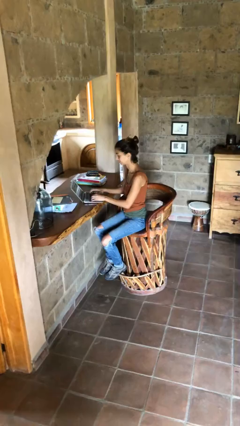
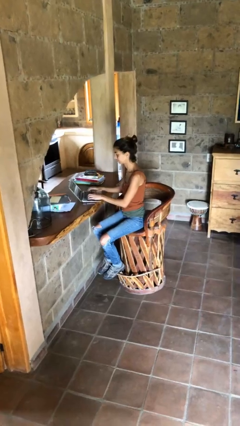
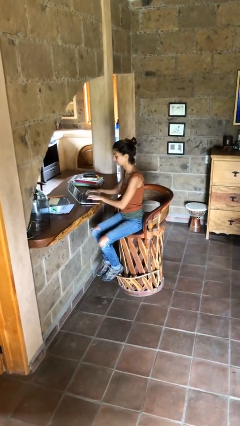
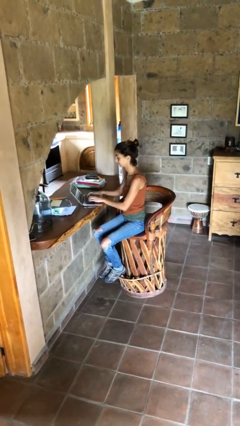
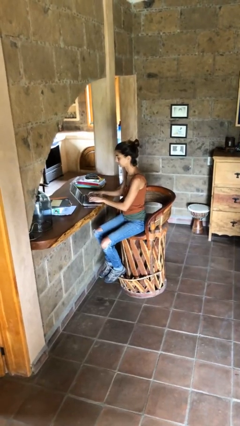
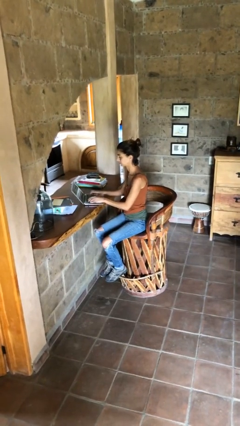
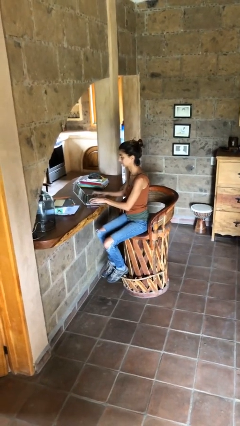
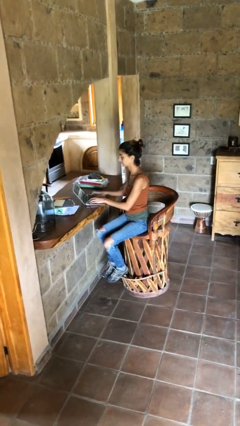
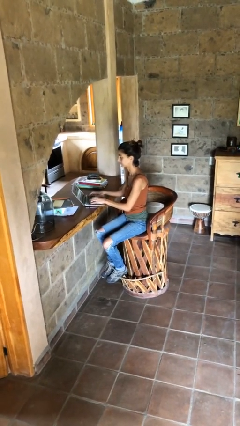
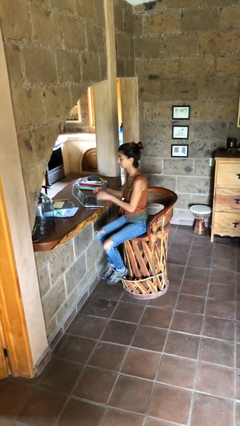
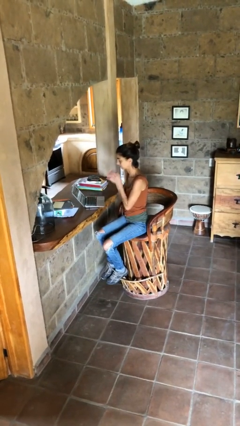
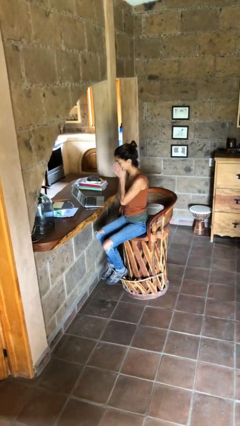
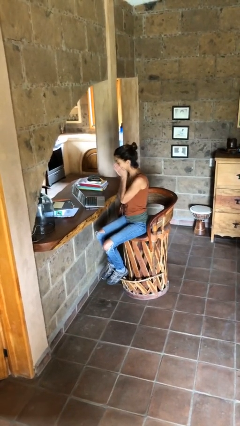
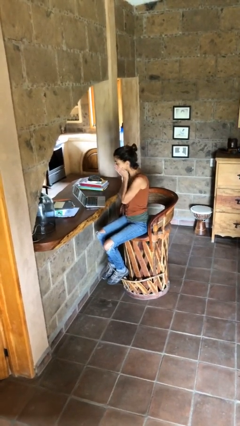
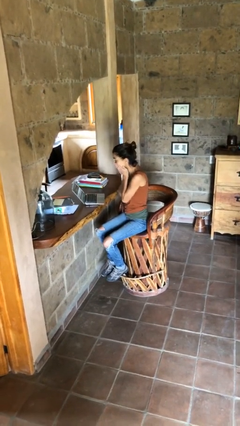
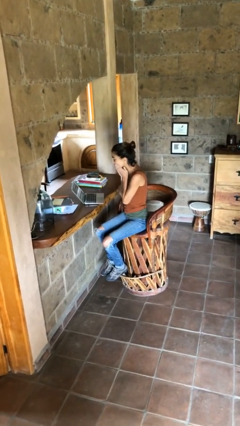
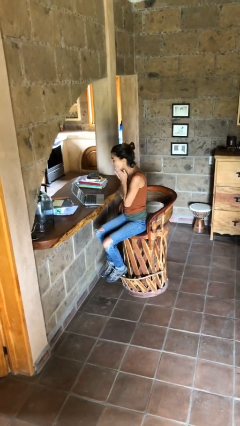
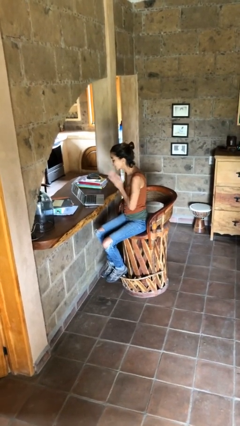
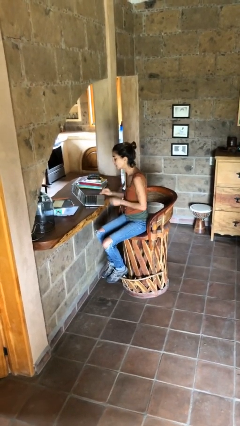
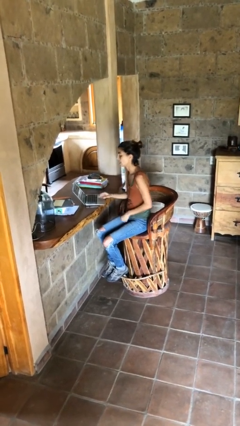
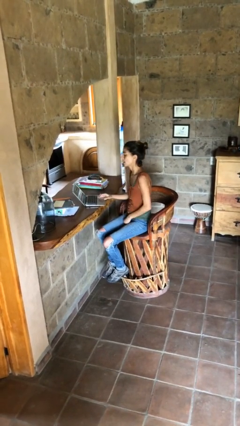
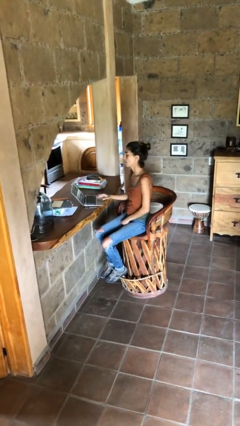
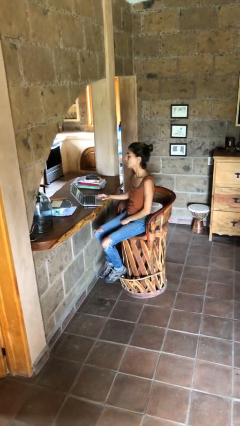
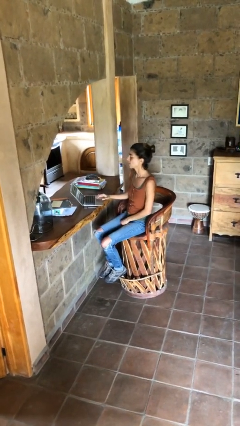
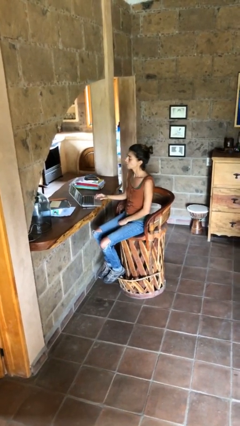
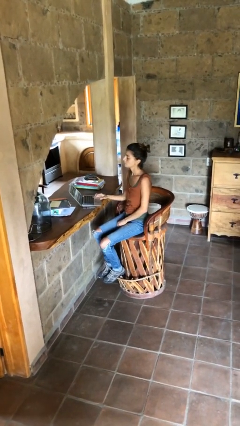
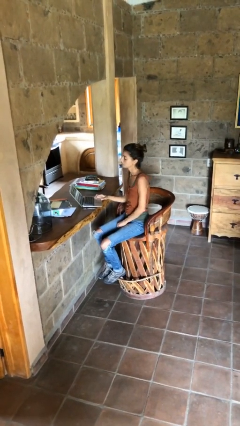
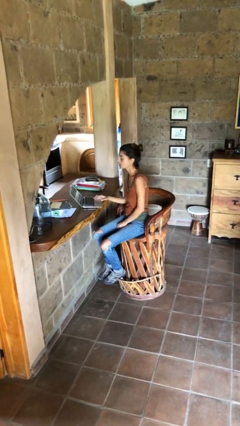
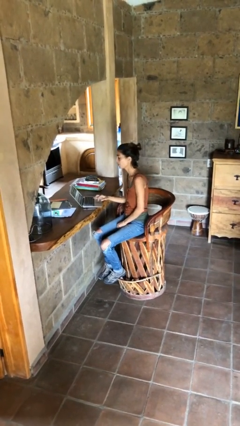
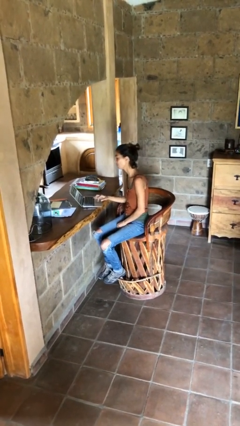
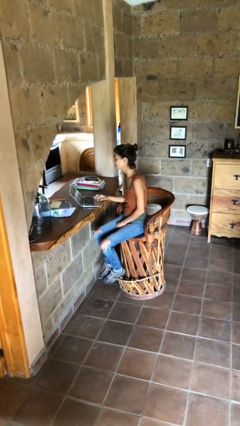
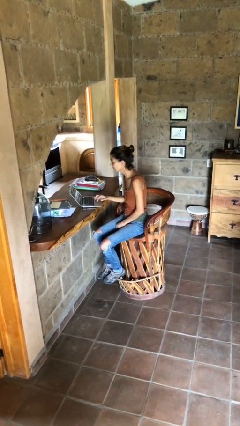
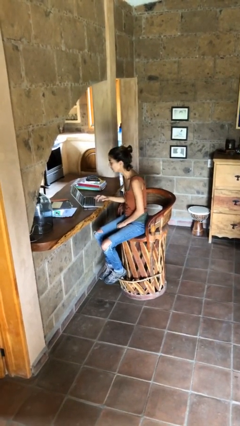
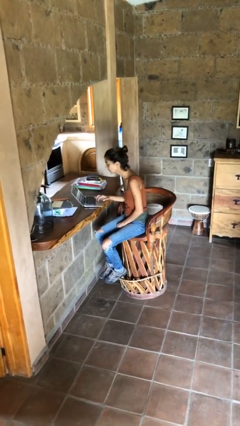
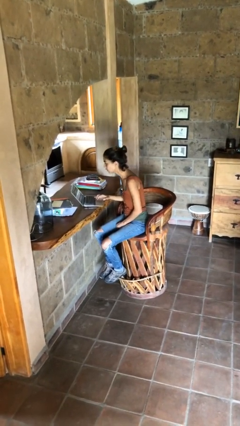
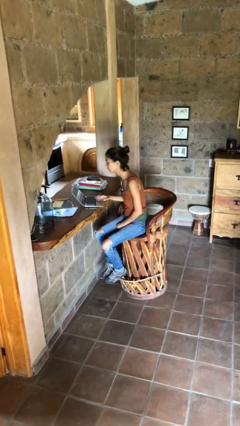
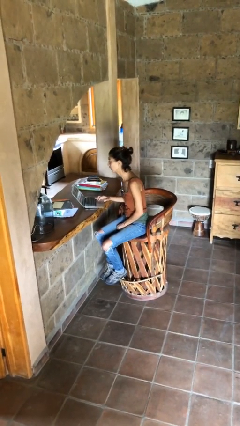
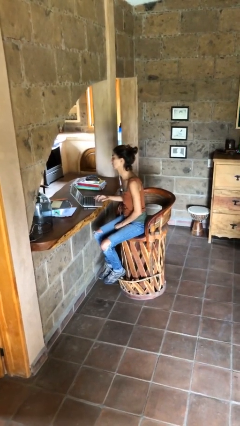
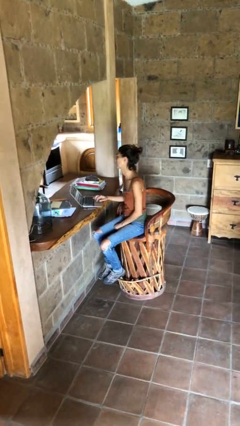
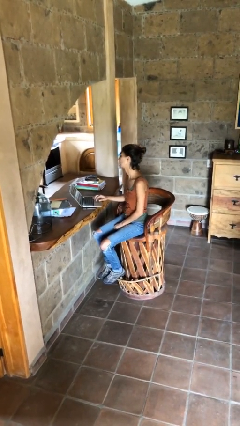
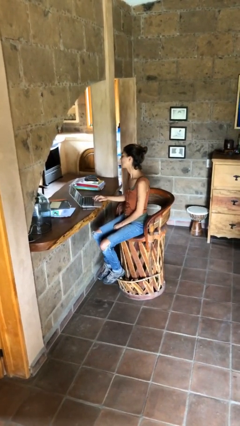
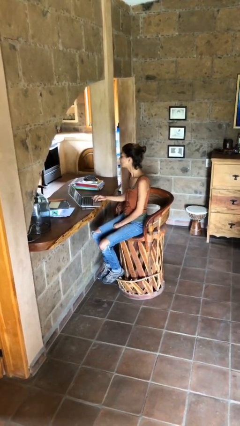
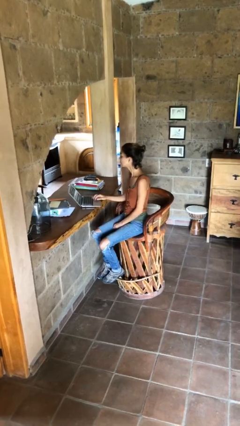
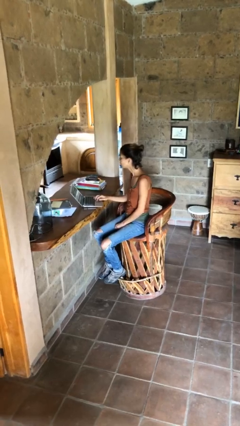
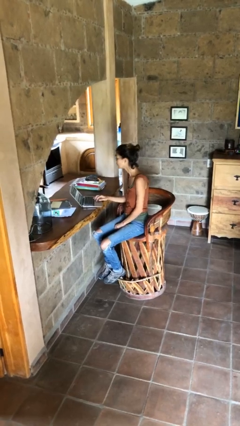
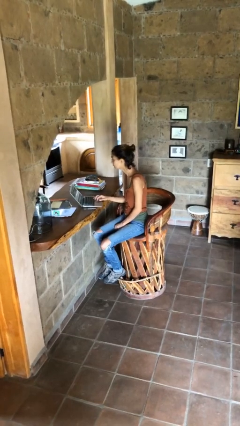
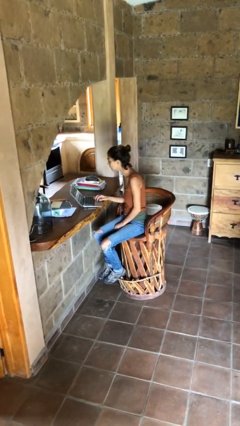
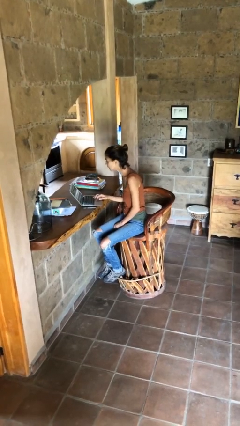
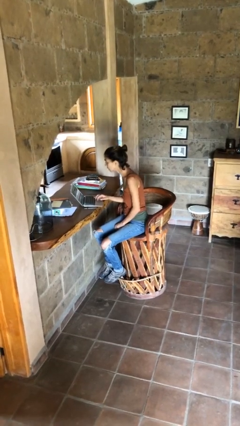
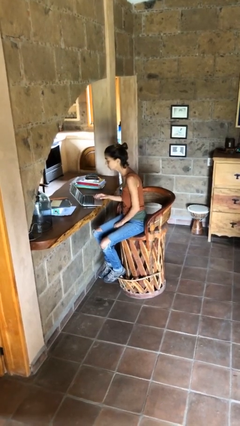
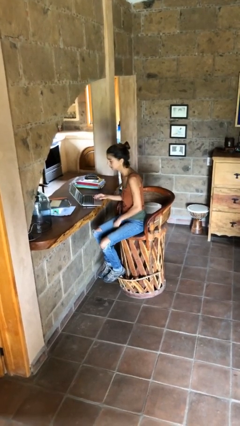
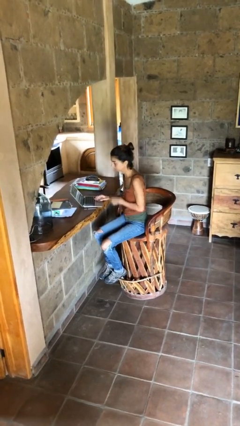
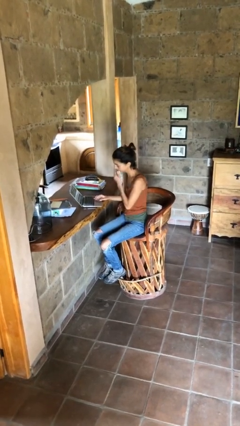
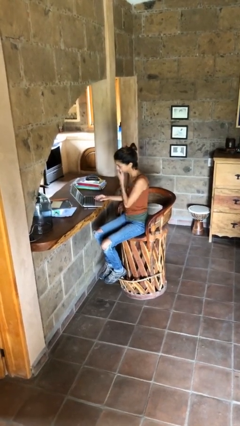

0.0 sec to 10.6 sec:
person interacts with laptop

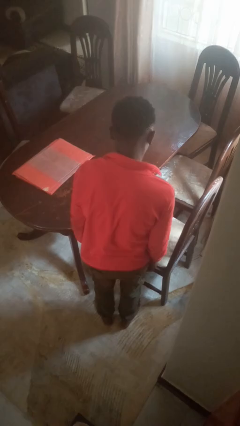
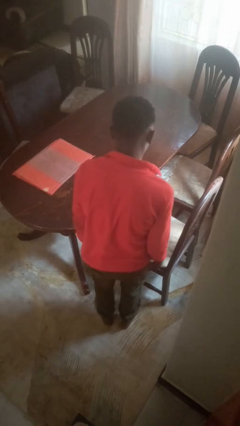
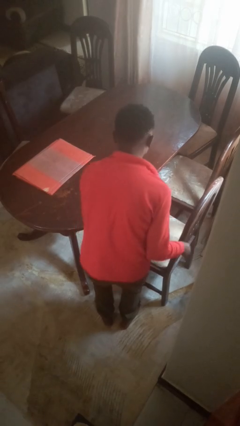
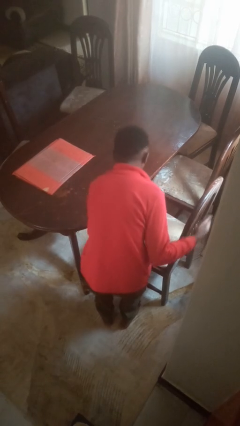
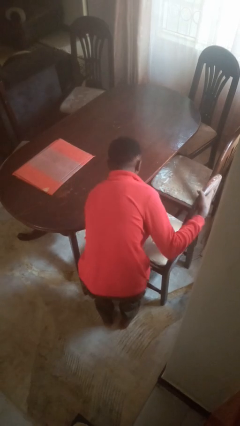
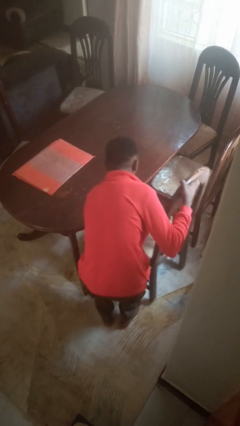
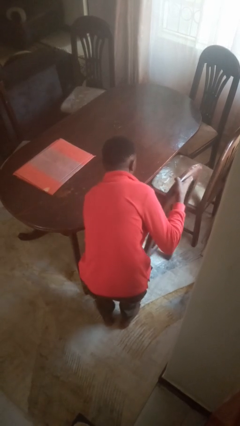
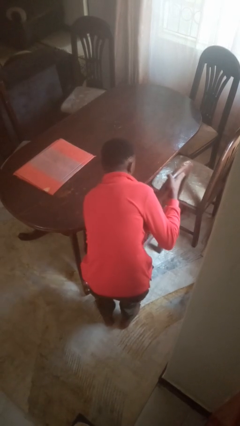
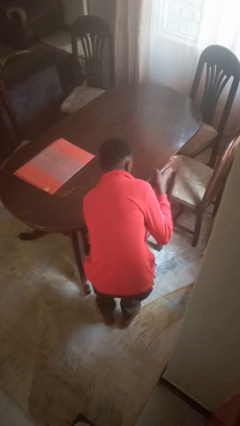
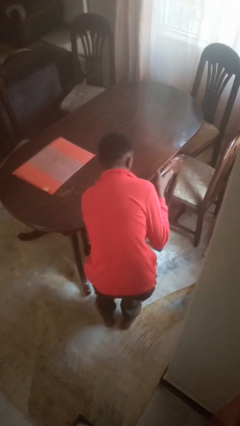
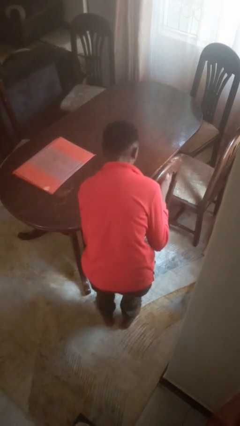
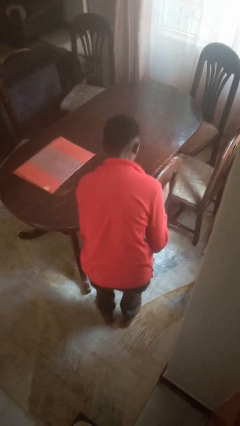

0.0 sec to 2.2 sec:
person pushes in chair

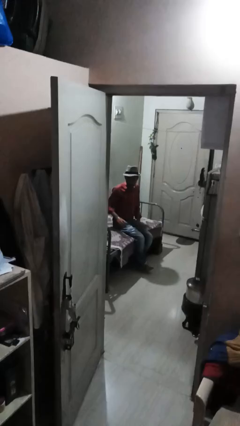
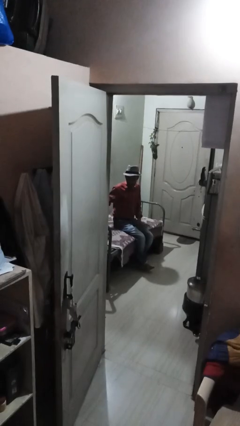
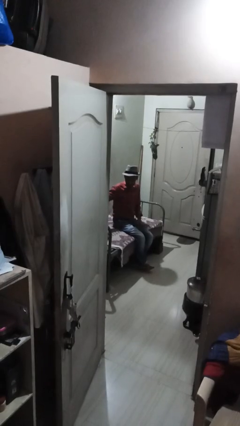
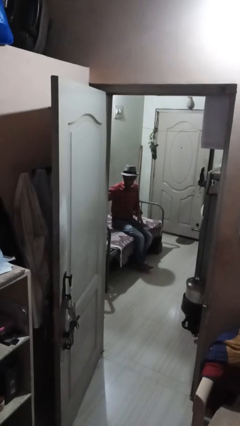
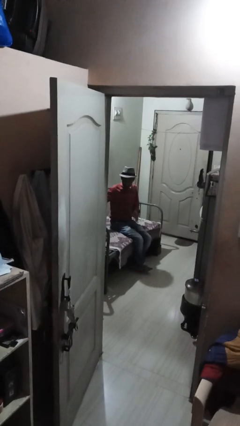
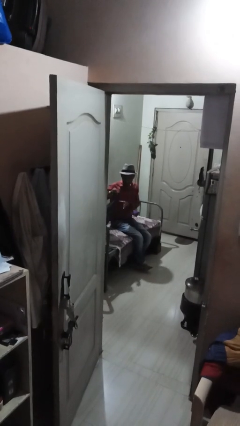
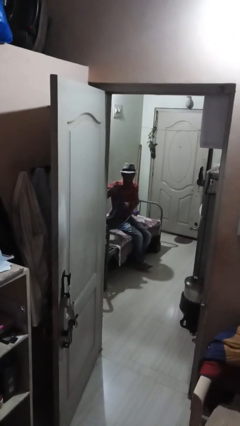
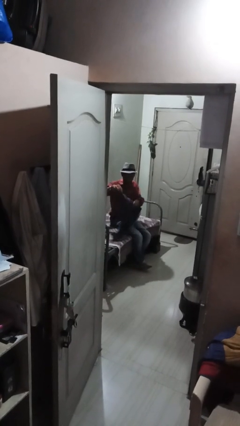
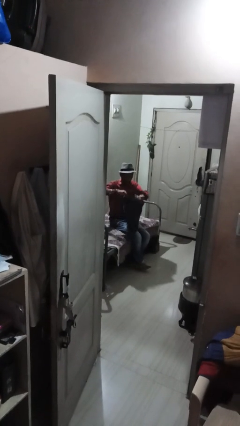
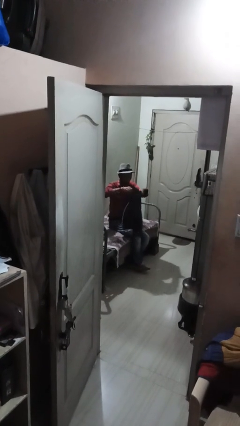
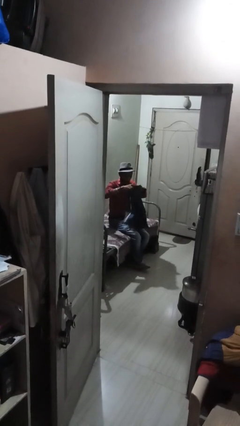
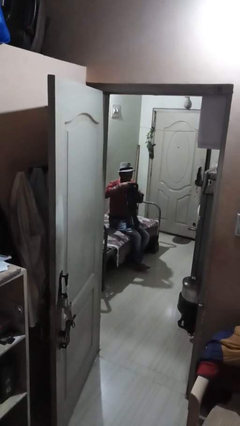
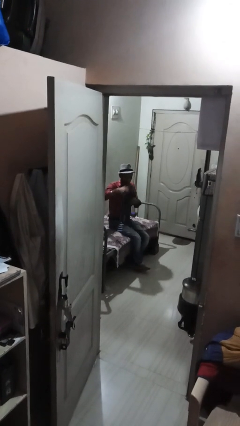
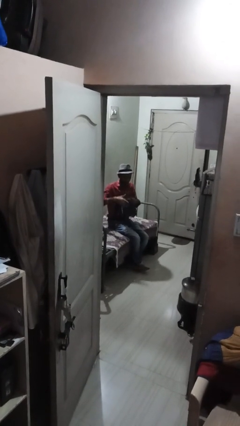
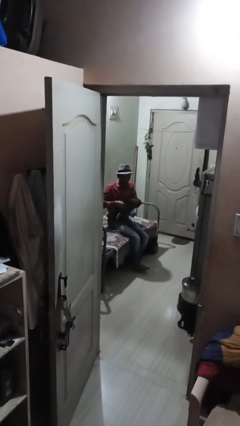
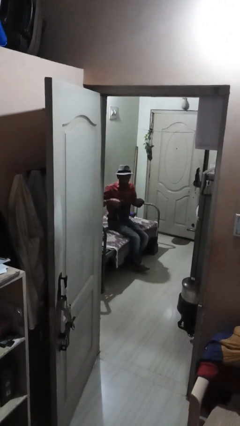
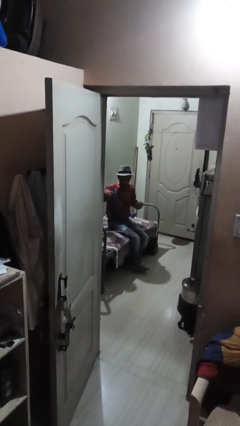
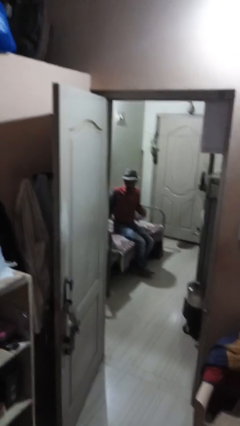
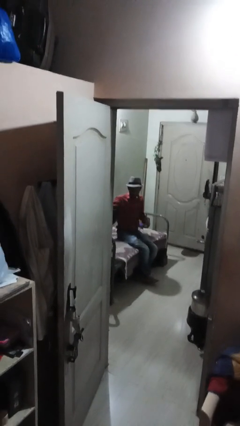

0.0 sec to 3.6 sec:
person folds pants

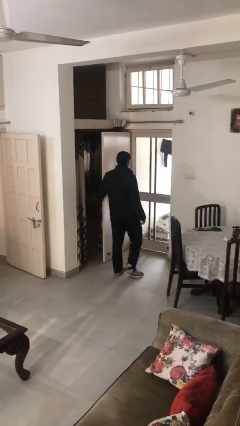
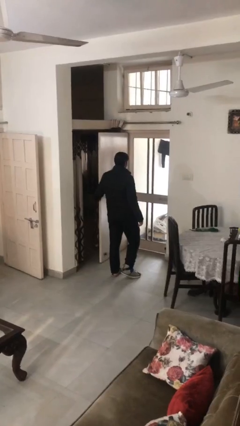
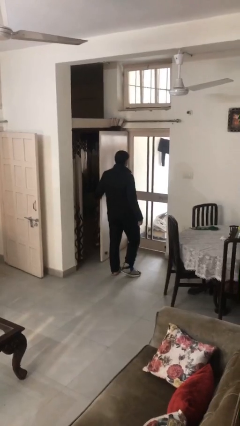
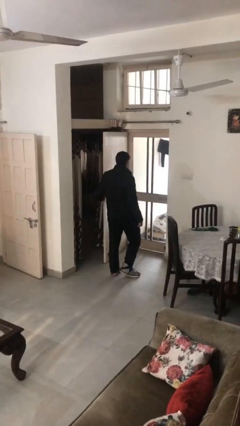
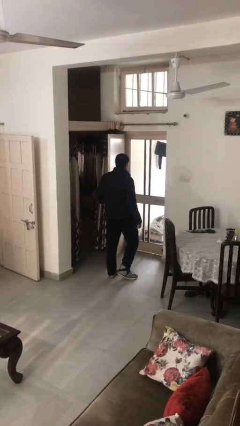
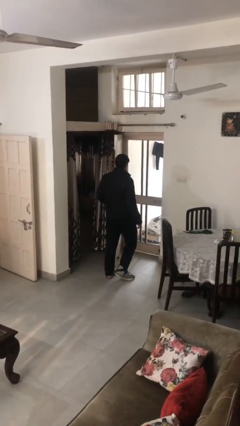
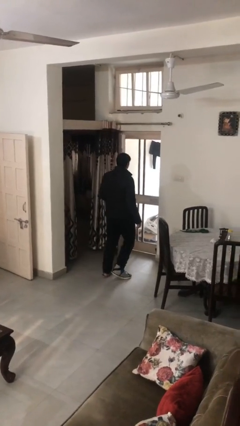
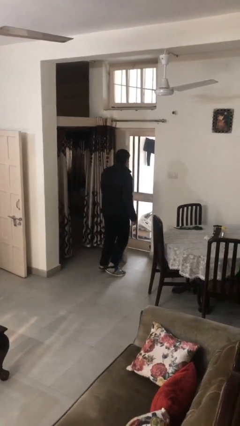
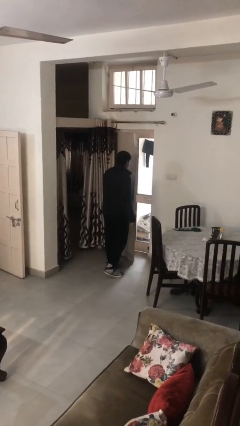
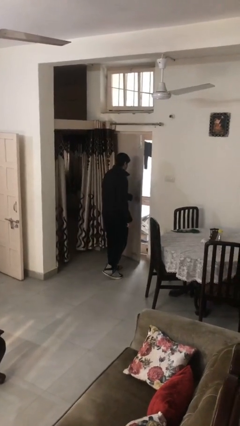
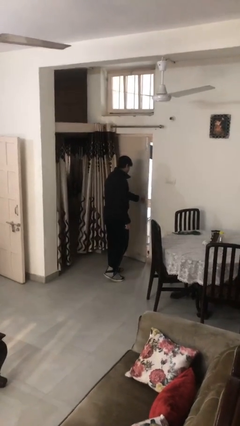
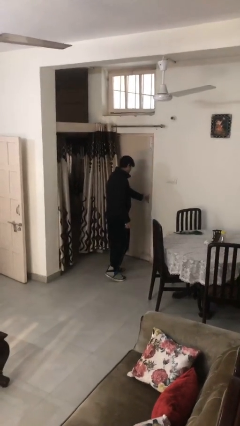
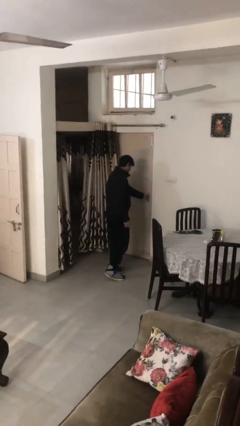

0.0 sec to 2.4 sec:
person closes facility door
